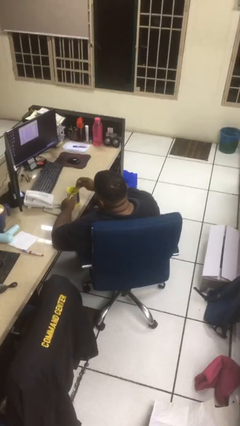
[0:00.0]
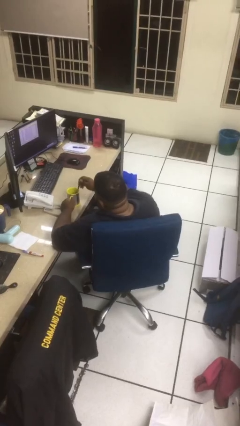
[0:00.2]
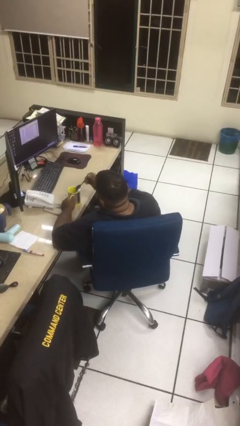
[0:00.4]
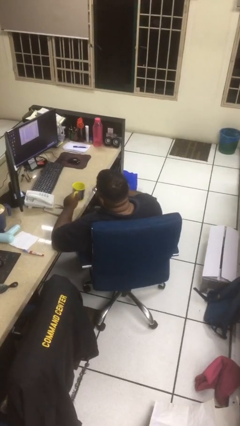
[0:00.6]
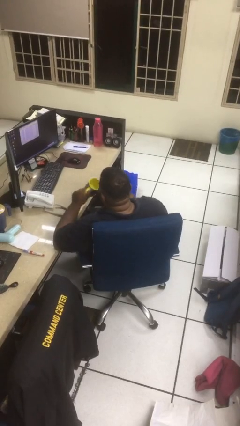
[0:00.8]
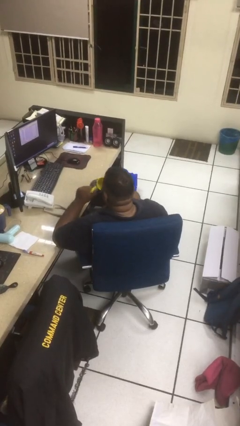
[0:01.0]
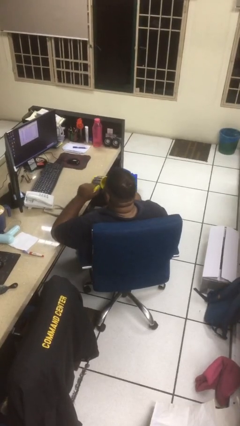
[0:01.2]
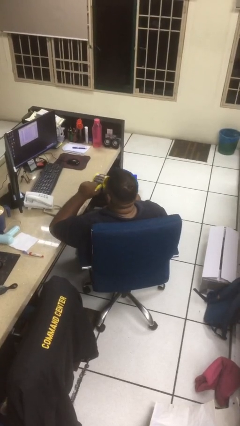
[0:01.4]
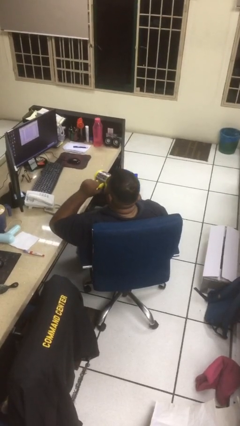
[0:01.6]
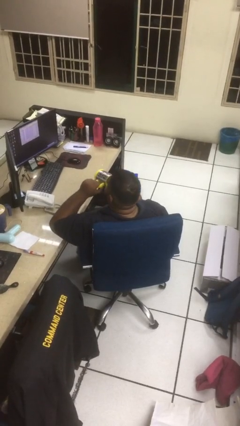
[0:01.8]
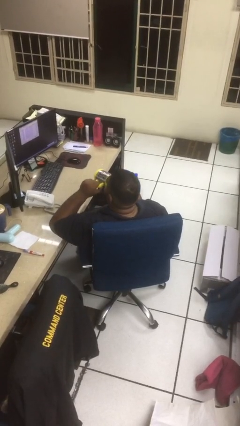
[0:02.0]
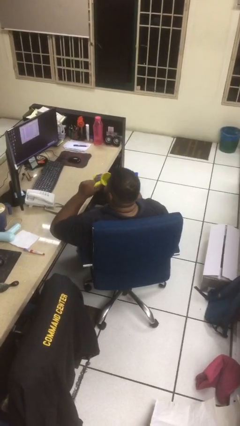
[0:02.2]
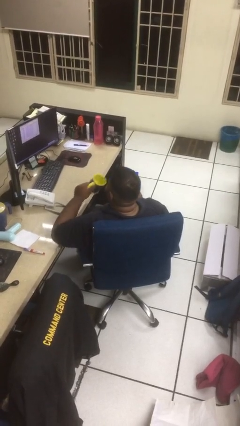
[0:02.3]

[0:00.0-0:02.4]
person drinks from mug

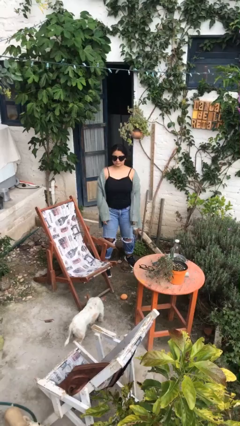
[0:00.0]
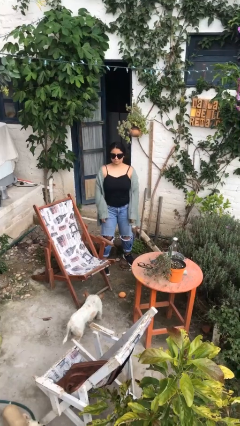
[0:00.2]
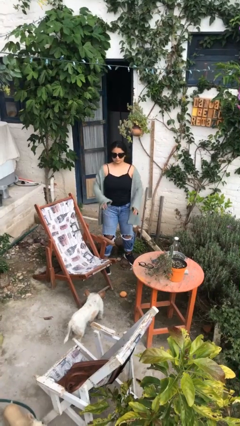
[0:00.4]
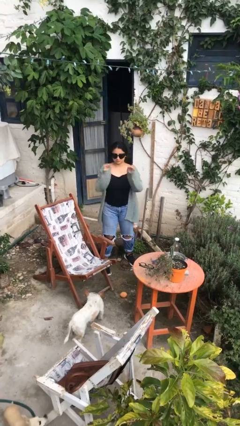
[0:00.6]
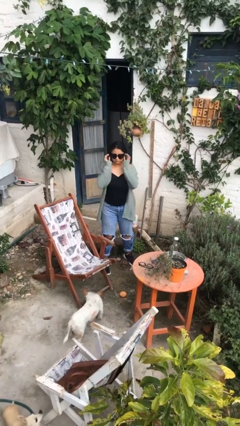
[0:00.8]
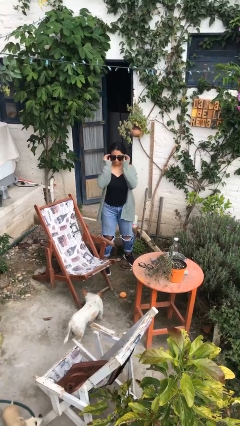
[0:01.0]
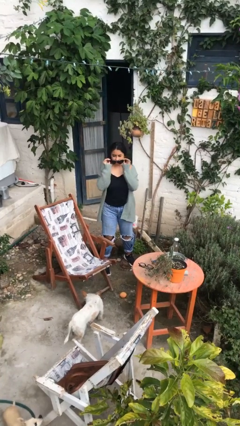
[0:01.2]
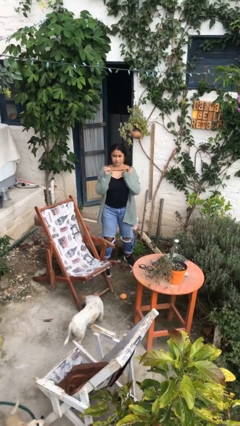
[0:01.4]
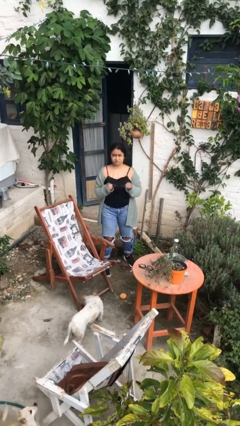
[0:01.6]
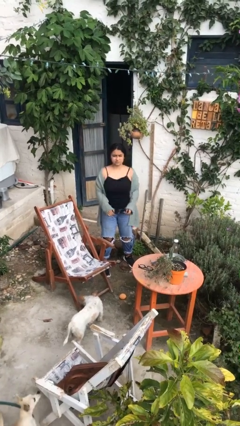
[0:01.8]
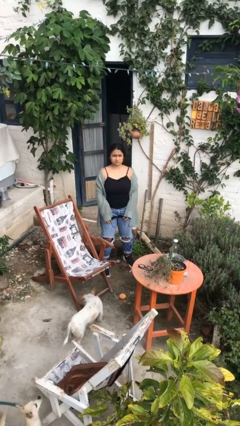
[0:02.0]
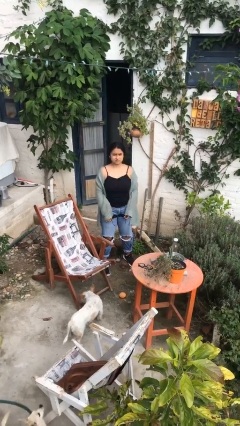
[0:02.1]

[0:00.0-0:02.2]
person takes off sunglasses

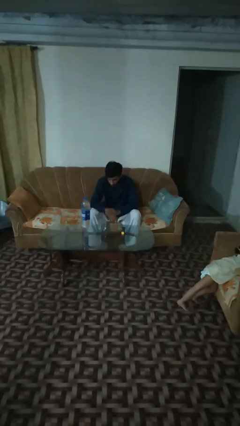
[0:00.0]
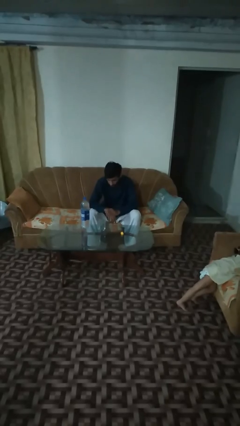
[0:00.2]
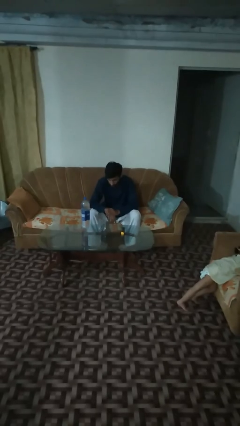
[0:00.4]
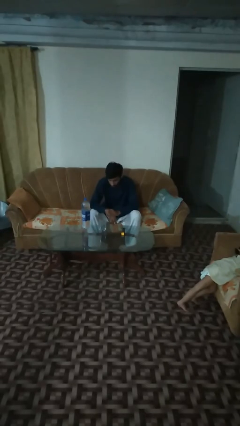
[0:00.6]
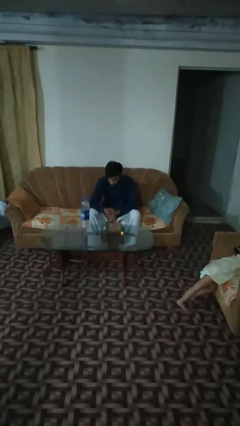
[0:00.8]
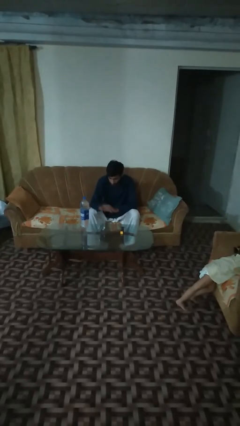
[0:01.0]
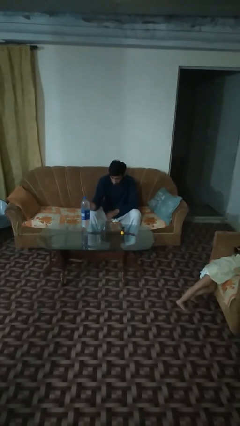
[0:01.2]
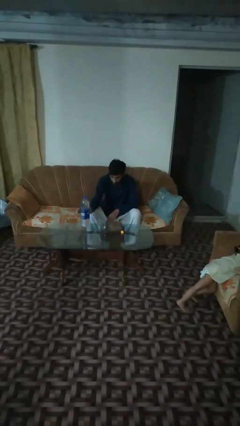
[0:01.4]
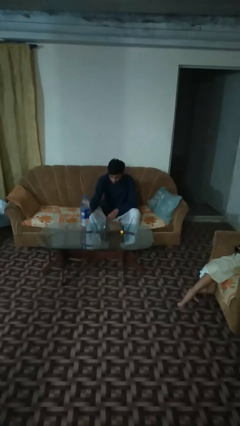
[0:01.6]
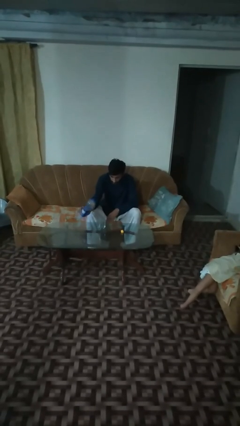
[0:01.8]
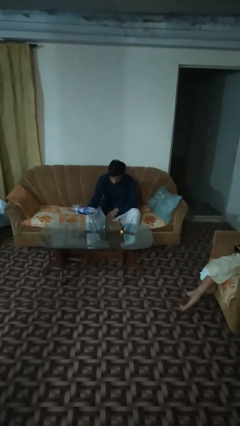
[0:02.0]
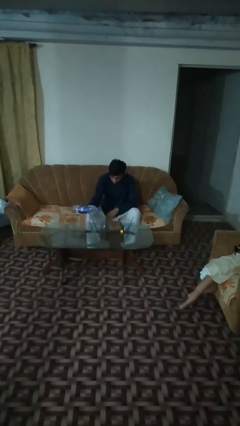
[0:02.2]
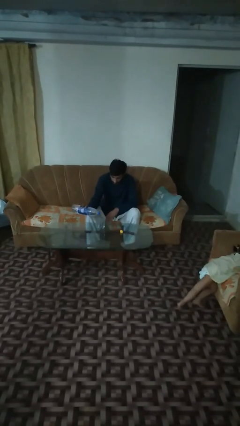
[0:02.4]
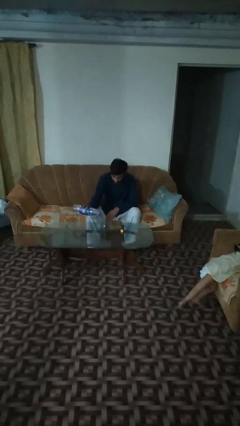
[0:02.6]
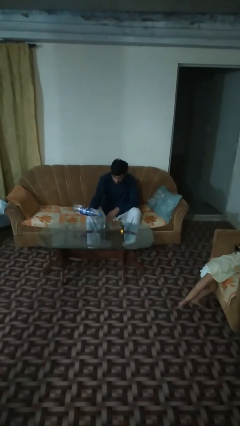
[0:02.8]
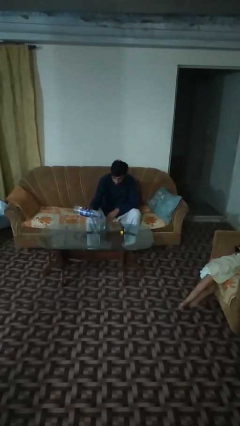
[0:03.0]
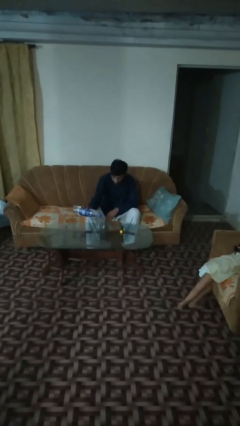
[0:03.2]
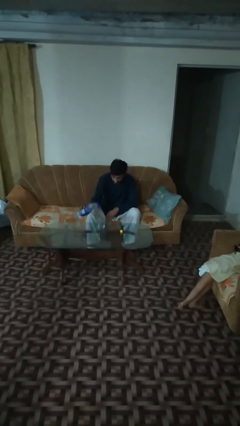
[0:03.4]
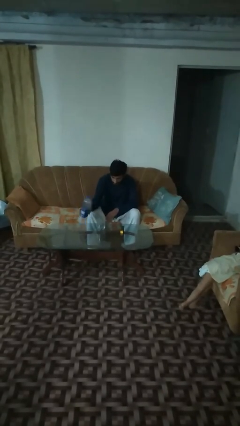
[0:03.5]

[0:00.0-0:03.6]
person pours liquid into cup

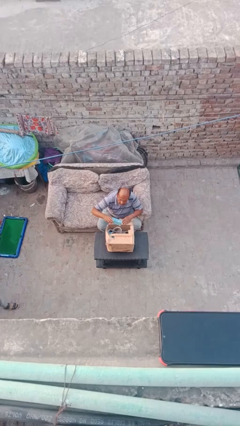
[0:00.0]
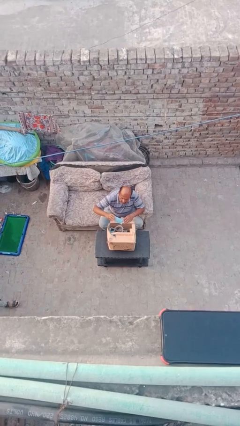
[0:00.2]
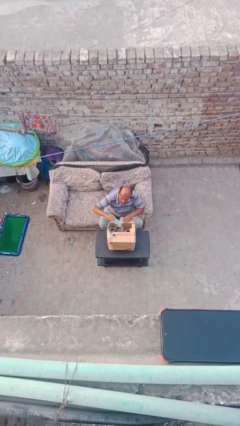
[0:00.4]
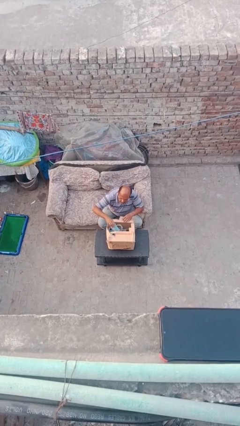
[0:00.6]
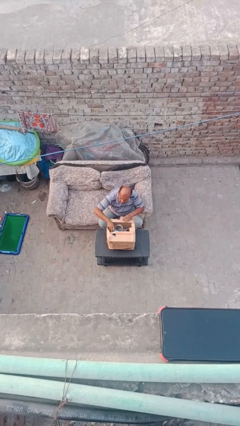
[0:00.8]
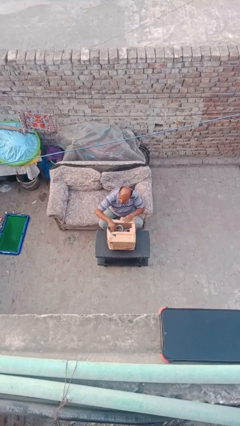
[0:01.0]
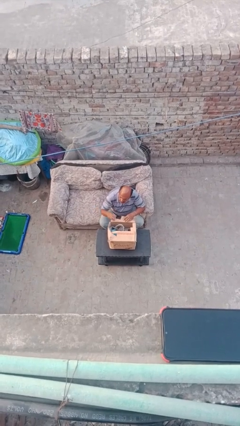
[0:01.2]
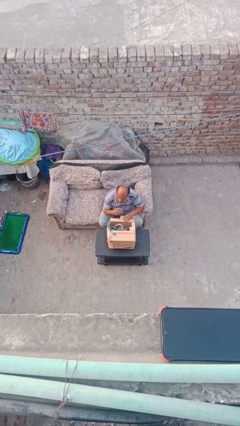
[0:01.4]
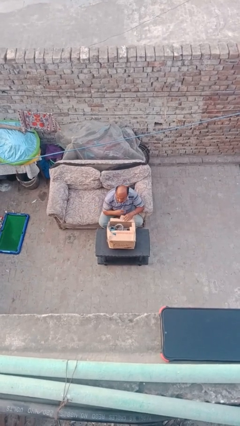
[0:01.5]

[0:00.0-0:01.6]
person puts object into box

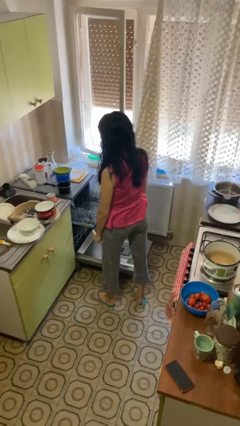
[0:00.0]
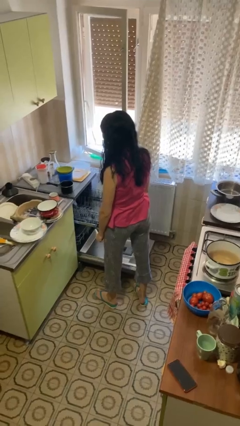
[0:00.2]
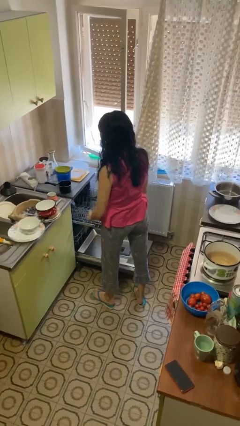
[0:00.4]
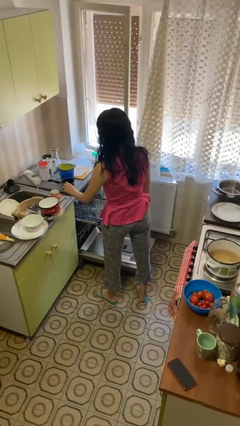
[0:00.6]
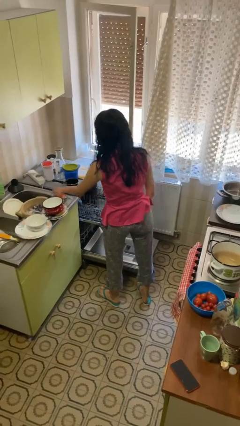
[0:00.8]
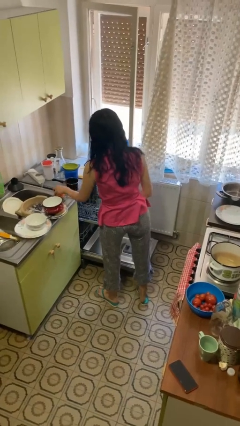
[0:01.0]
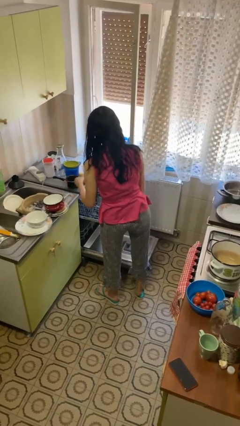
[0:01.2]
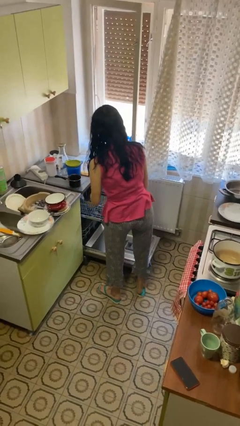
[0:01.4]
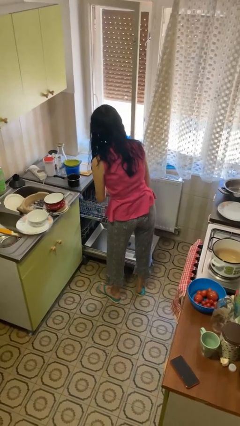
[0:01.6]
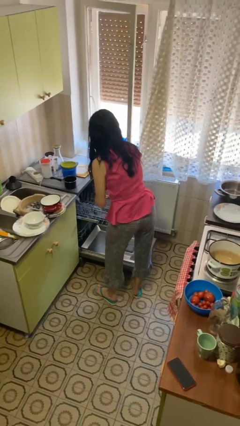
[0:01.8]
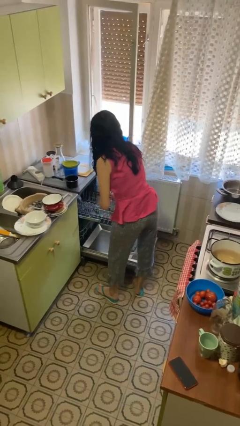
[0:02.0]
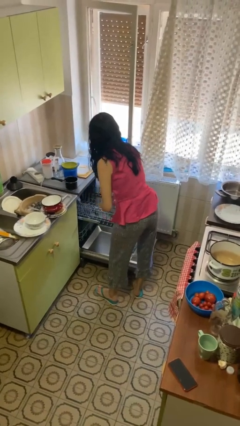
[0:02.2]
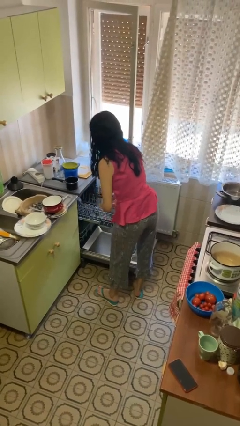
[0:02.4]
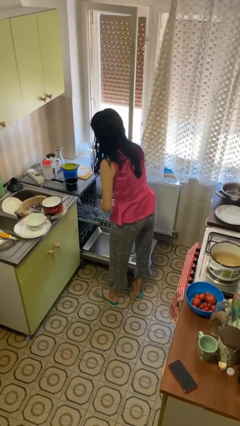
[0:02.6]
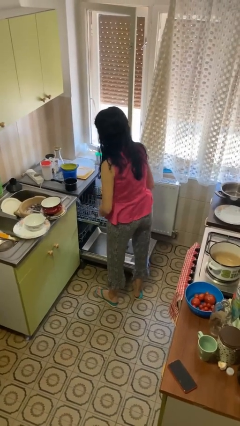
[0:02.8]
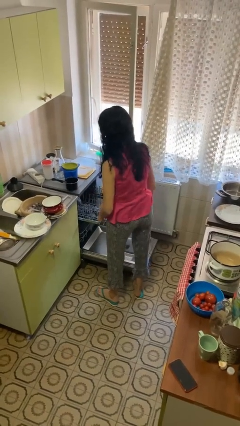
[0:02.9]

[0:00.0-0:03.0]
person loads dishwasher

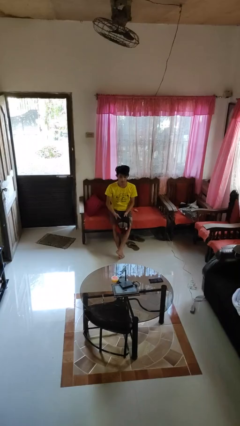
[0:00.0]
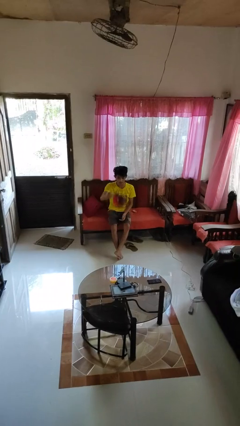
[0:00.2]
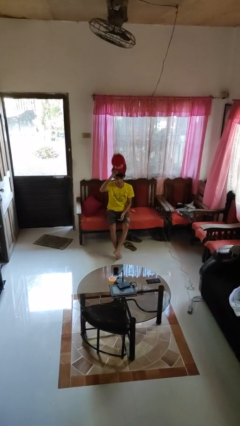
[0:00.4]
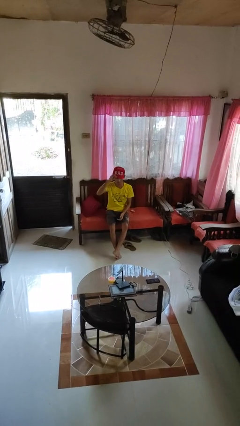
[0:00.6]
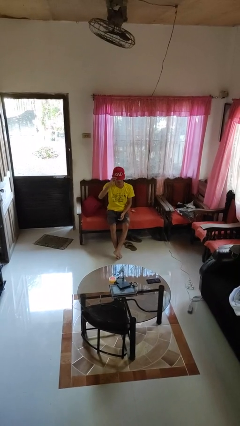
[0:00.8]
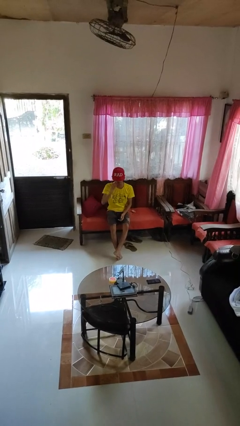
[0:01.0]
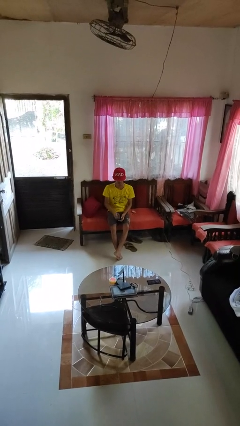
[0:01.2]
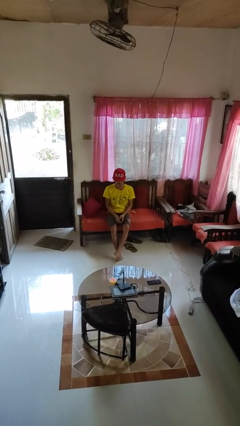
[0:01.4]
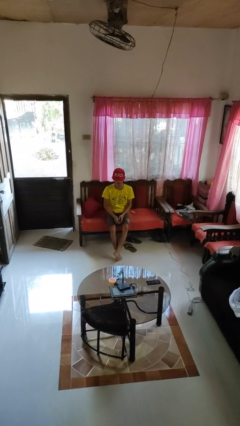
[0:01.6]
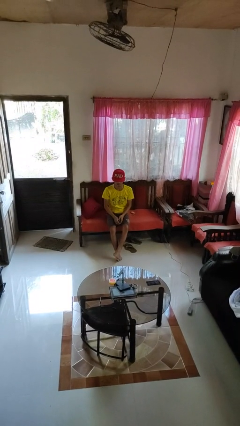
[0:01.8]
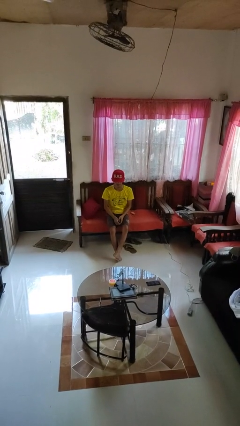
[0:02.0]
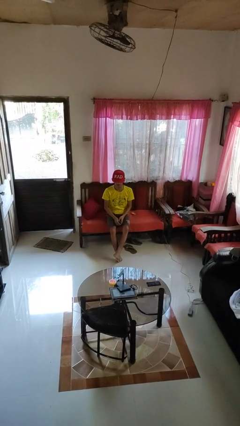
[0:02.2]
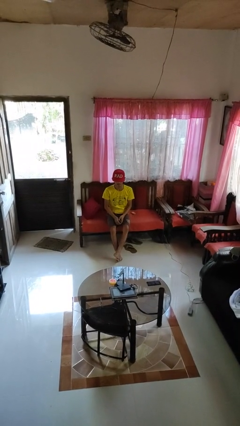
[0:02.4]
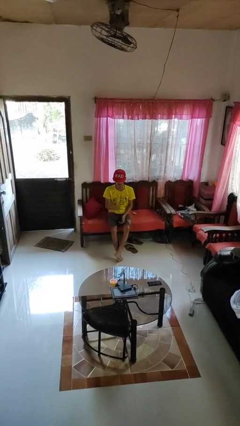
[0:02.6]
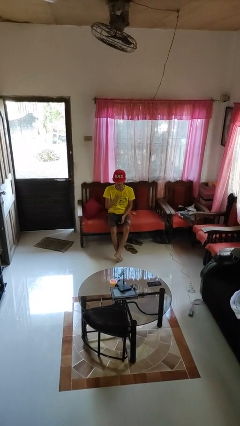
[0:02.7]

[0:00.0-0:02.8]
person puts on hat

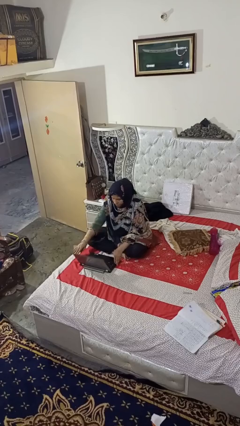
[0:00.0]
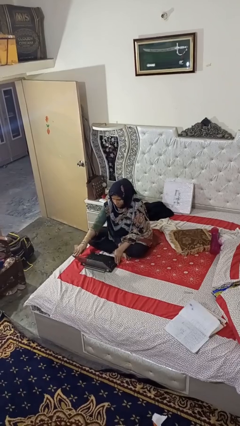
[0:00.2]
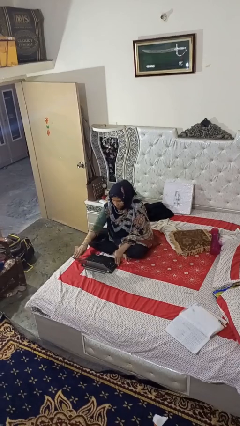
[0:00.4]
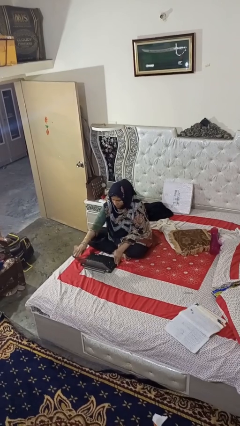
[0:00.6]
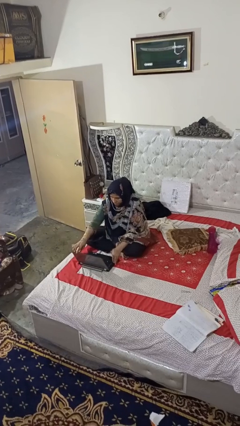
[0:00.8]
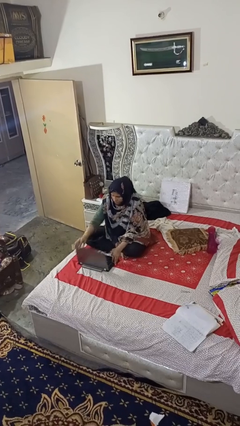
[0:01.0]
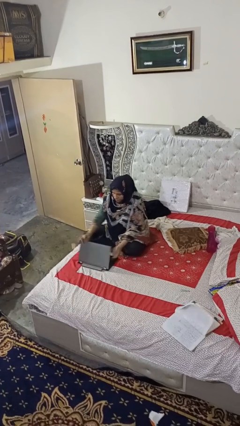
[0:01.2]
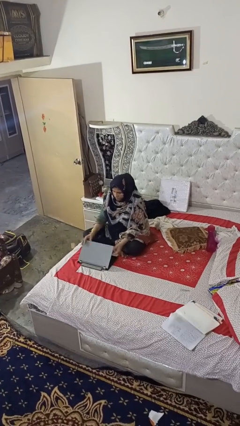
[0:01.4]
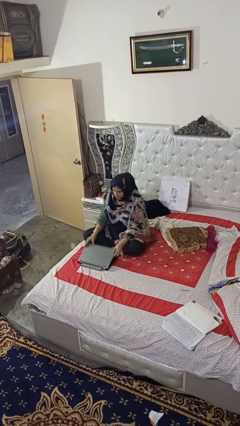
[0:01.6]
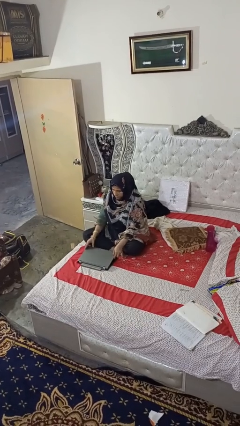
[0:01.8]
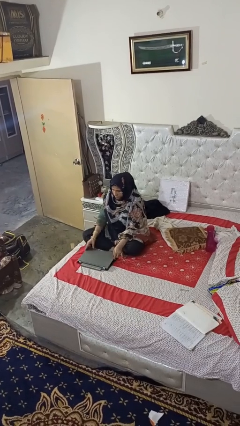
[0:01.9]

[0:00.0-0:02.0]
person closes laptop
